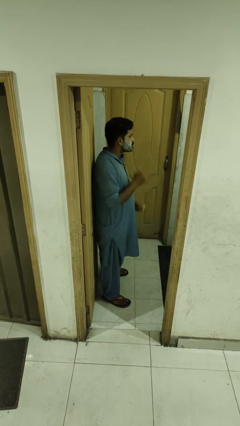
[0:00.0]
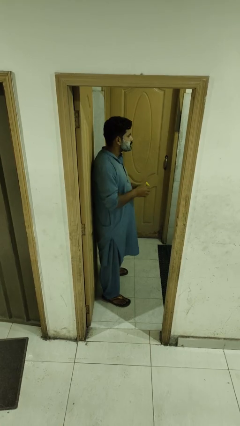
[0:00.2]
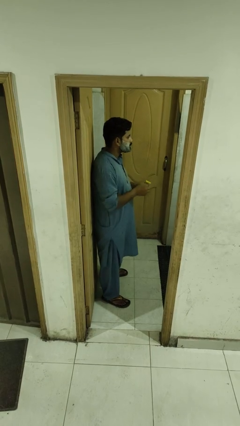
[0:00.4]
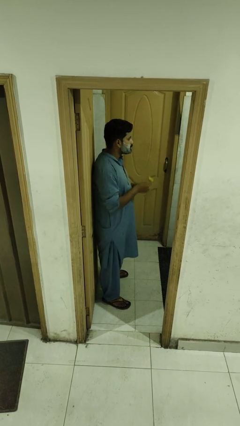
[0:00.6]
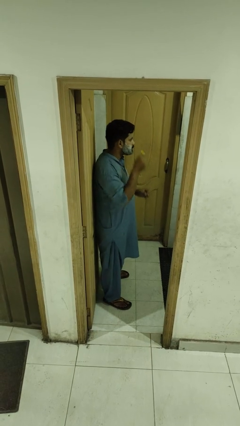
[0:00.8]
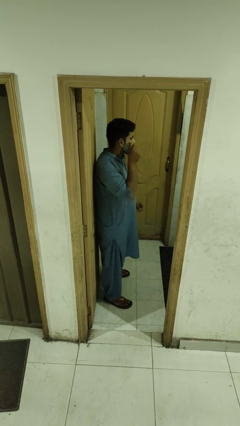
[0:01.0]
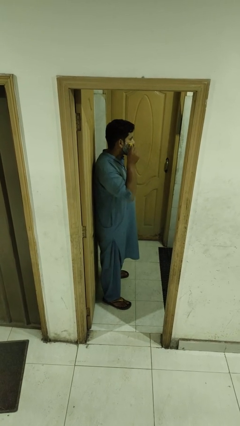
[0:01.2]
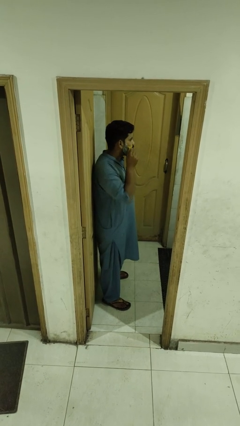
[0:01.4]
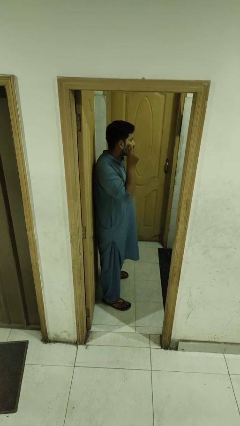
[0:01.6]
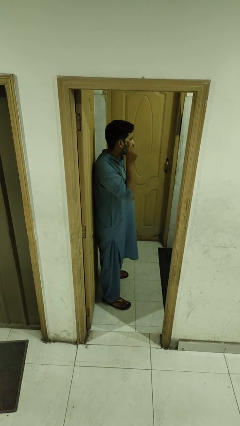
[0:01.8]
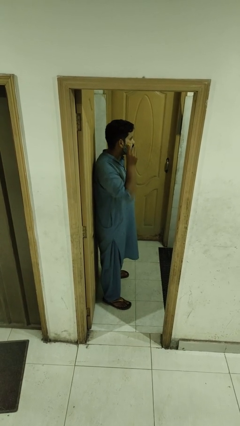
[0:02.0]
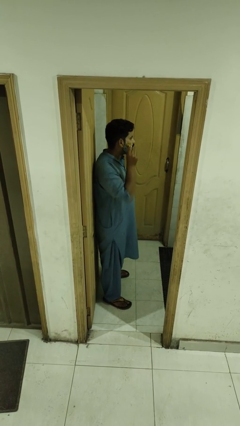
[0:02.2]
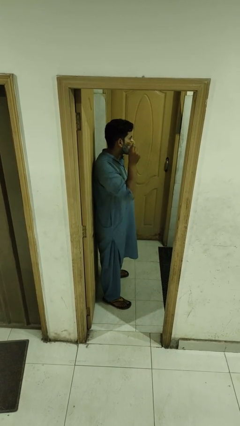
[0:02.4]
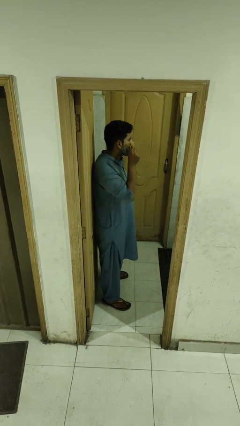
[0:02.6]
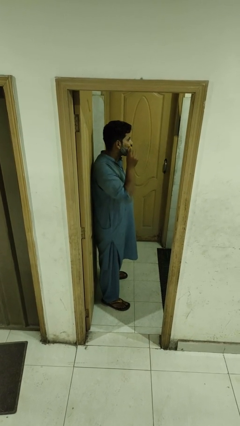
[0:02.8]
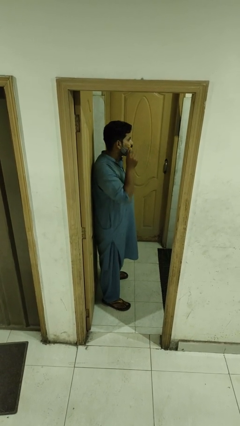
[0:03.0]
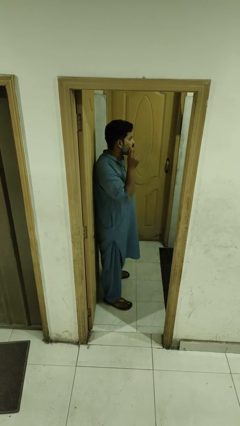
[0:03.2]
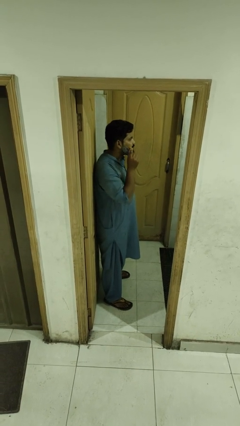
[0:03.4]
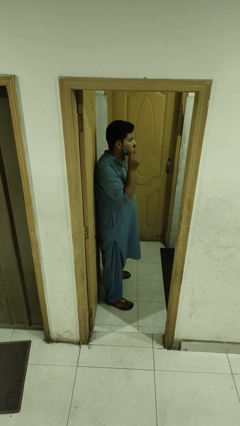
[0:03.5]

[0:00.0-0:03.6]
person shaves face

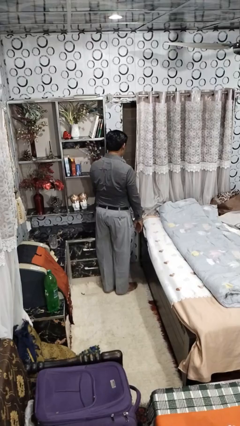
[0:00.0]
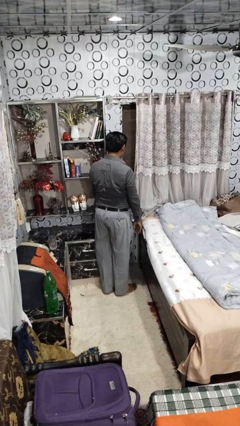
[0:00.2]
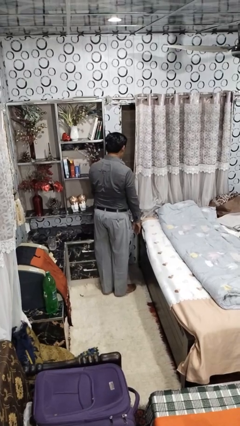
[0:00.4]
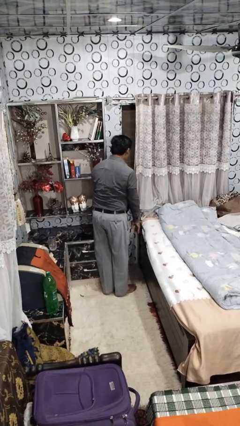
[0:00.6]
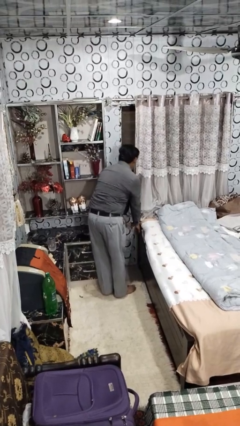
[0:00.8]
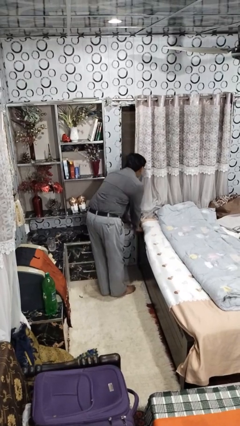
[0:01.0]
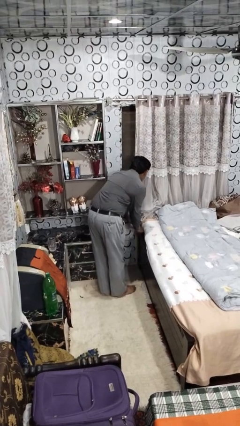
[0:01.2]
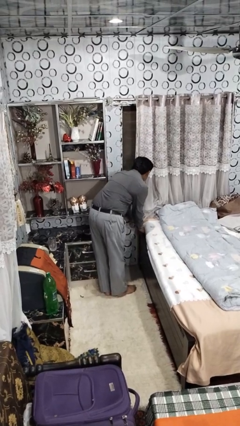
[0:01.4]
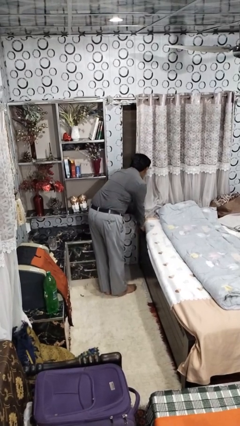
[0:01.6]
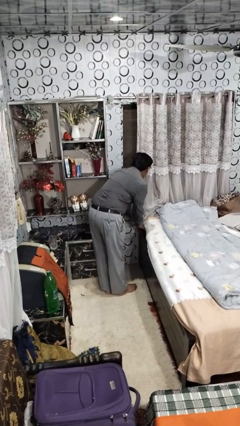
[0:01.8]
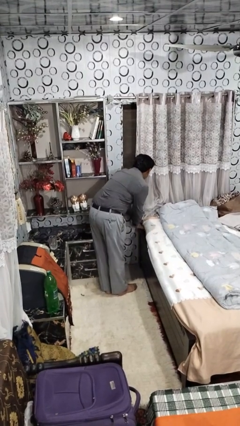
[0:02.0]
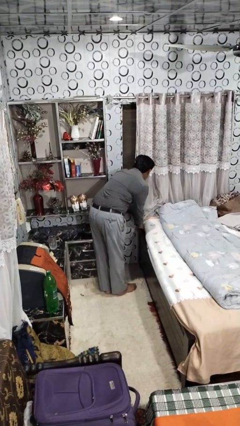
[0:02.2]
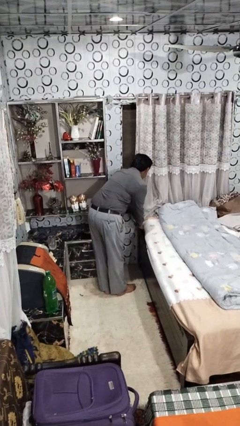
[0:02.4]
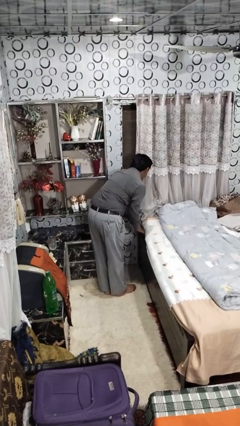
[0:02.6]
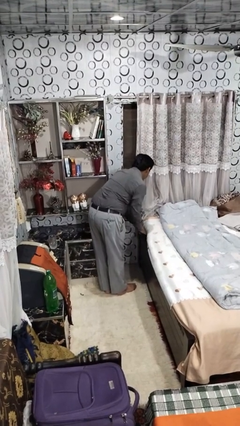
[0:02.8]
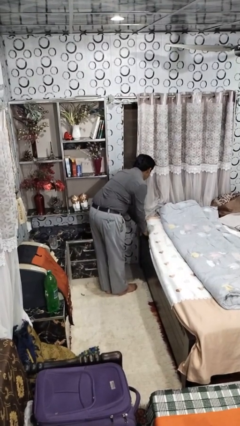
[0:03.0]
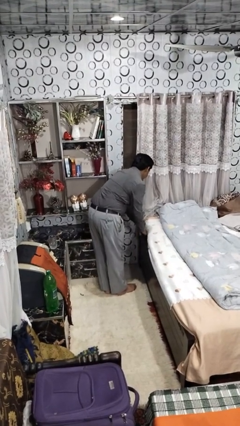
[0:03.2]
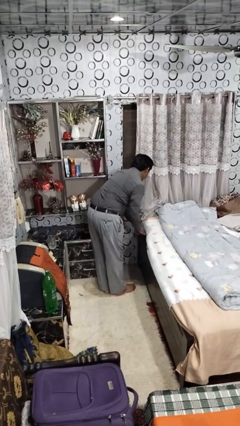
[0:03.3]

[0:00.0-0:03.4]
person makes bed

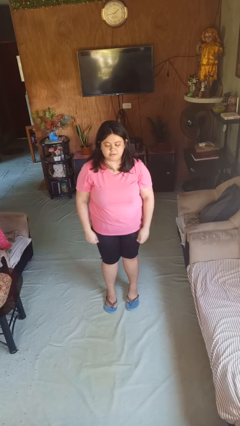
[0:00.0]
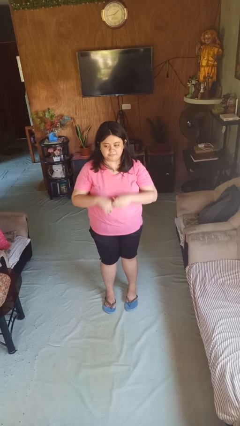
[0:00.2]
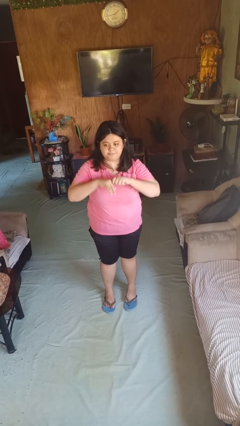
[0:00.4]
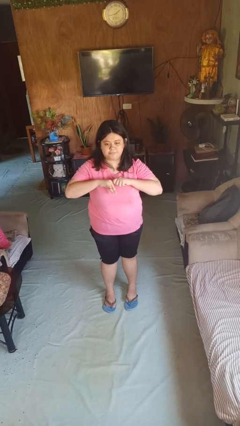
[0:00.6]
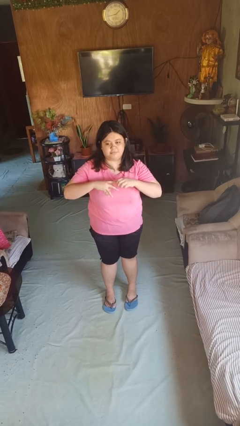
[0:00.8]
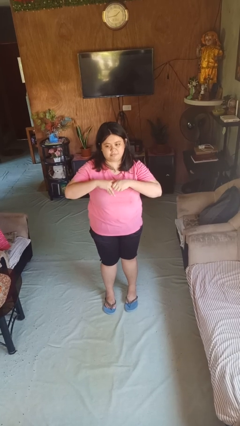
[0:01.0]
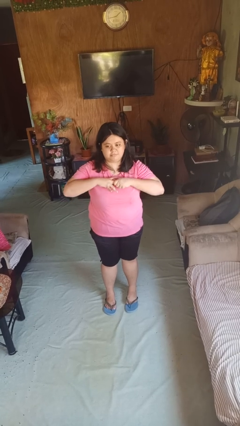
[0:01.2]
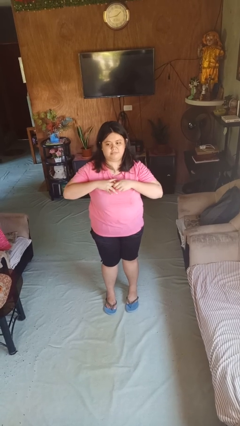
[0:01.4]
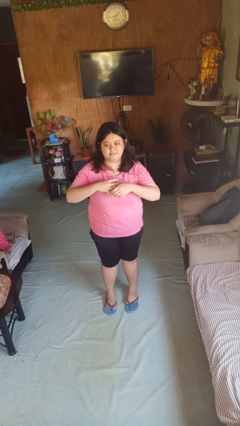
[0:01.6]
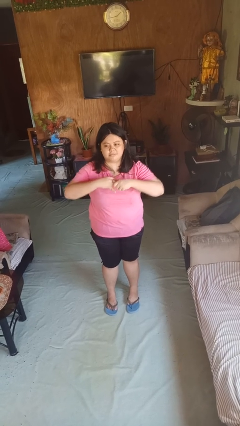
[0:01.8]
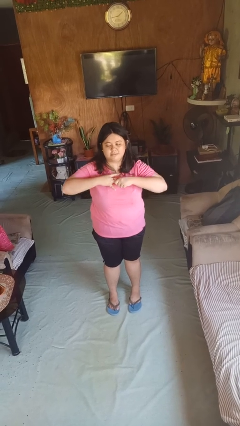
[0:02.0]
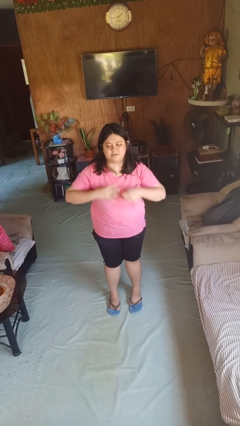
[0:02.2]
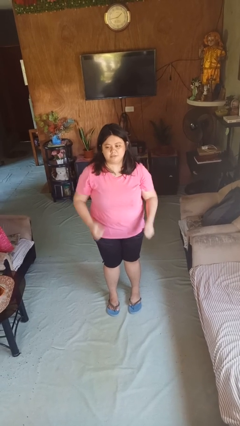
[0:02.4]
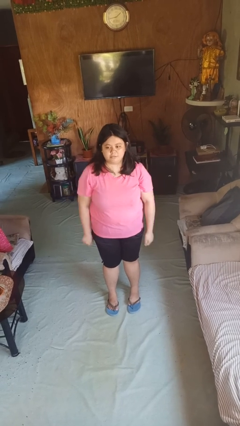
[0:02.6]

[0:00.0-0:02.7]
person cracks knuckles

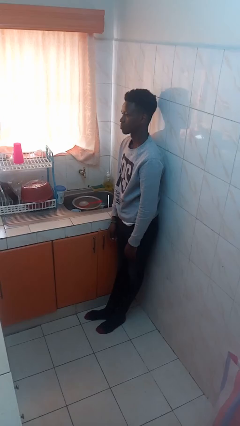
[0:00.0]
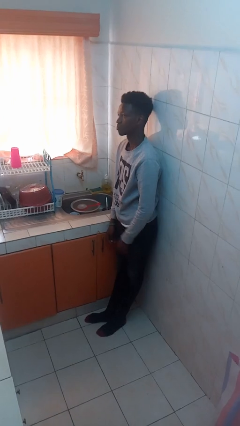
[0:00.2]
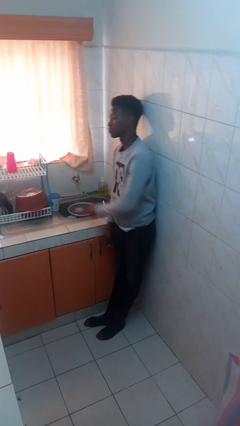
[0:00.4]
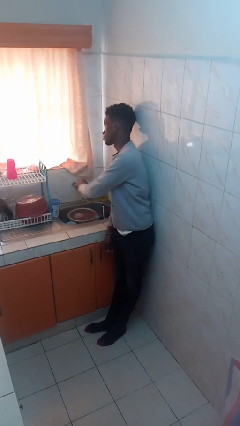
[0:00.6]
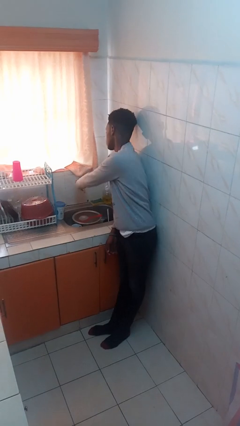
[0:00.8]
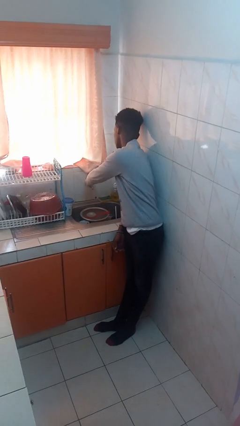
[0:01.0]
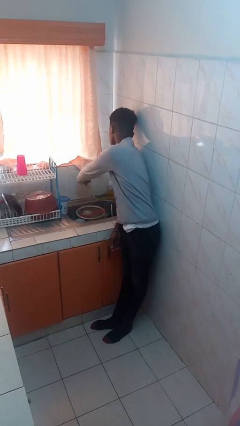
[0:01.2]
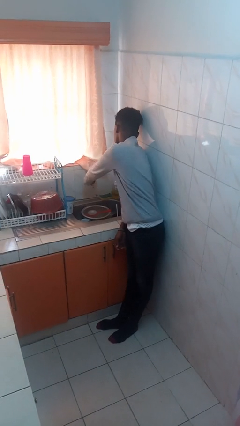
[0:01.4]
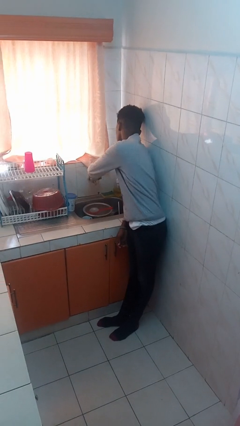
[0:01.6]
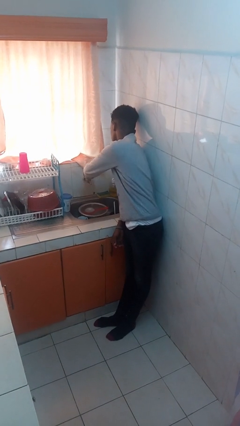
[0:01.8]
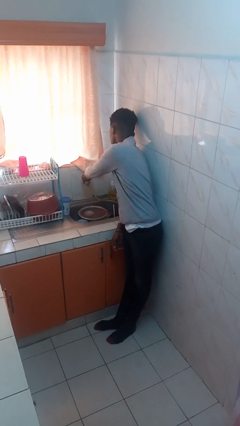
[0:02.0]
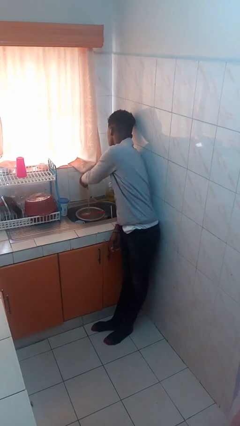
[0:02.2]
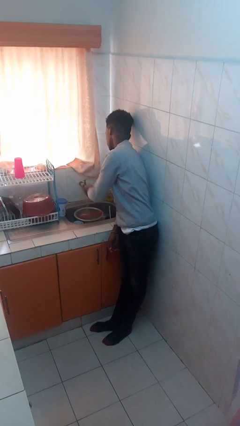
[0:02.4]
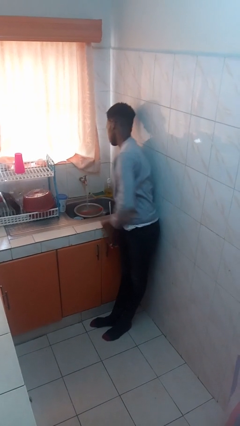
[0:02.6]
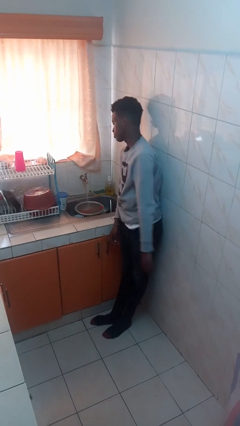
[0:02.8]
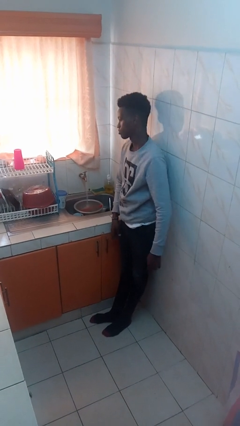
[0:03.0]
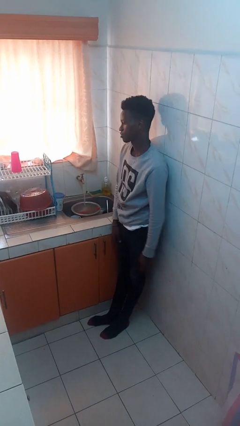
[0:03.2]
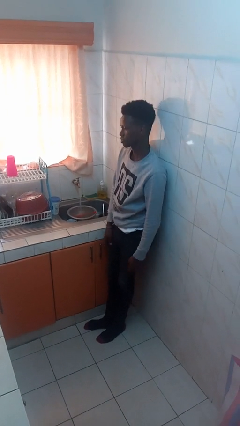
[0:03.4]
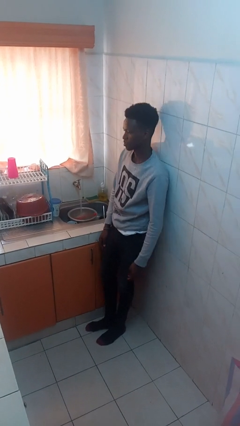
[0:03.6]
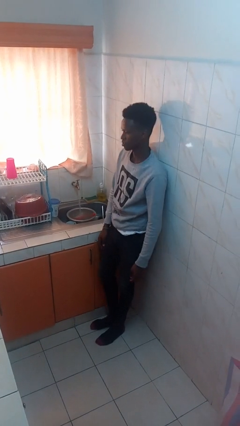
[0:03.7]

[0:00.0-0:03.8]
person turns on faucet

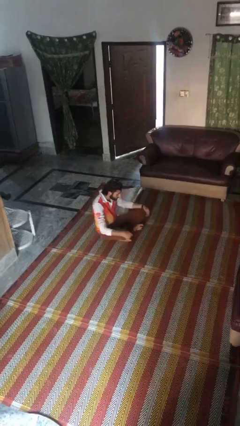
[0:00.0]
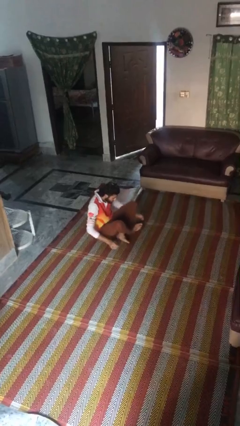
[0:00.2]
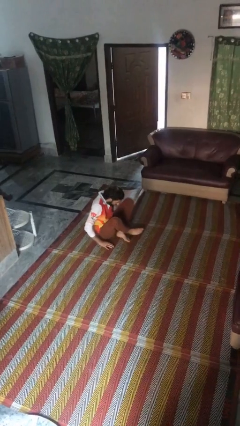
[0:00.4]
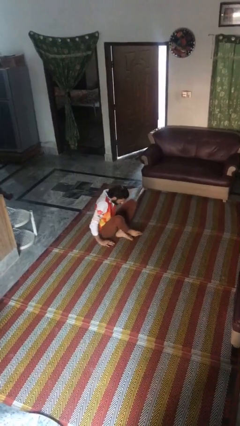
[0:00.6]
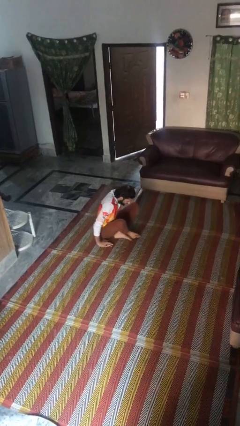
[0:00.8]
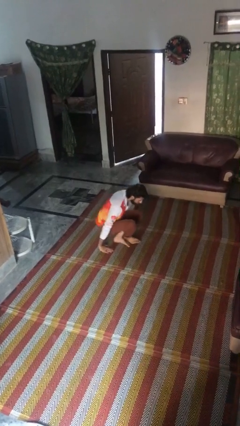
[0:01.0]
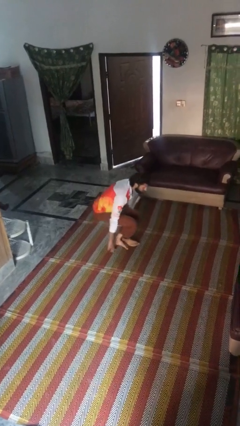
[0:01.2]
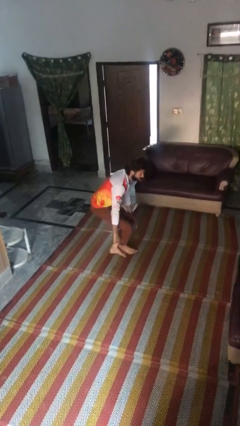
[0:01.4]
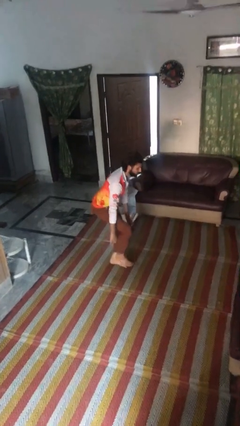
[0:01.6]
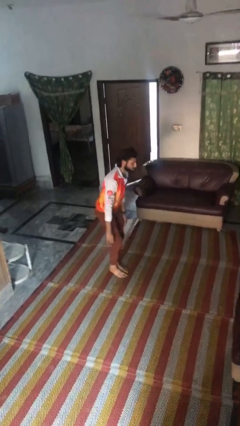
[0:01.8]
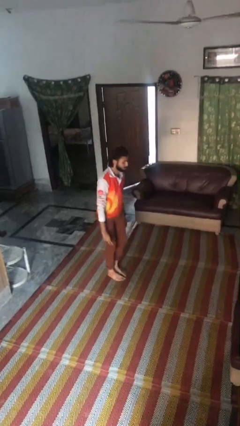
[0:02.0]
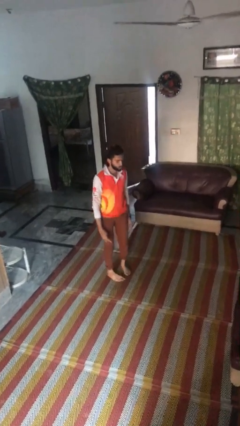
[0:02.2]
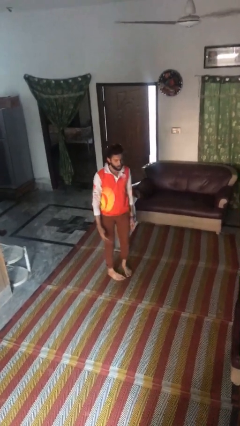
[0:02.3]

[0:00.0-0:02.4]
person stands up from floor

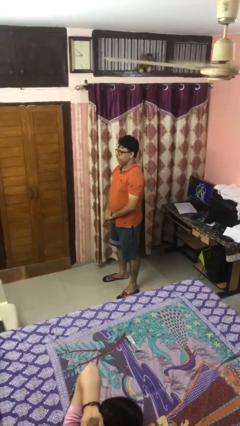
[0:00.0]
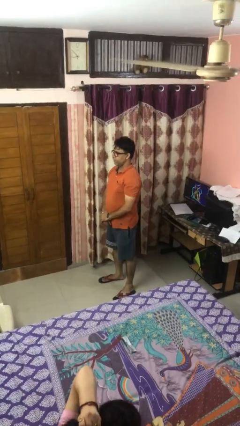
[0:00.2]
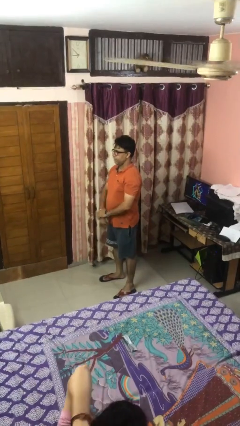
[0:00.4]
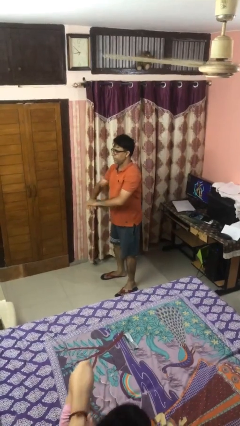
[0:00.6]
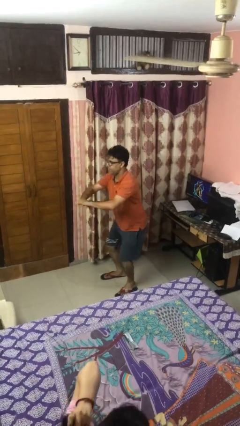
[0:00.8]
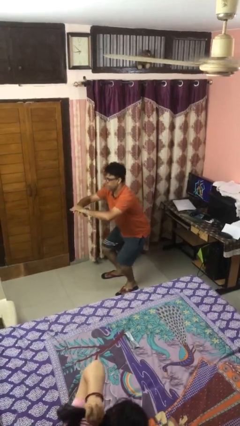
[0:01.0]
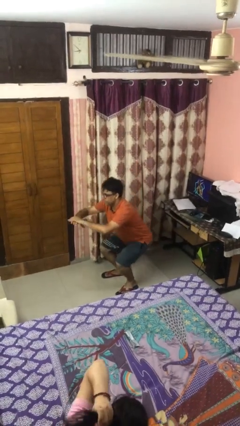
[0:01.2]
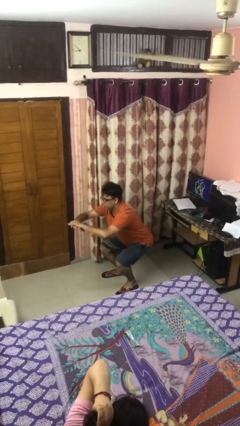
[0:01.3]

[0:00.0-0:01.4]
person squats
